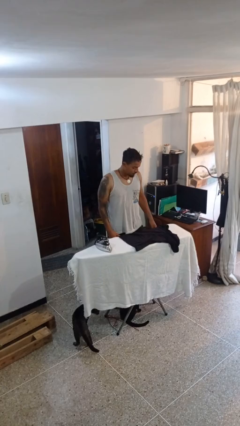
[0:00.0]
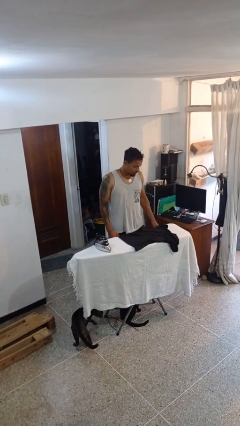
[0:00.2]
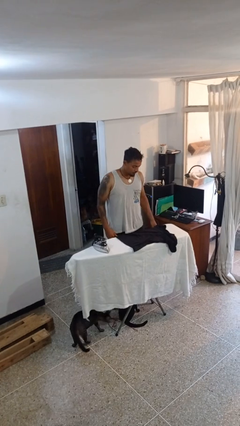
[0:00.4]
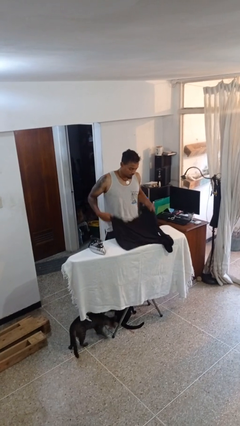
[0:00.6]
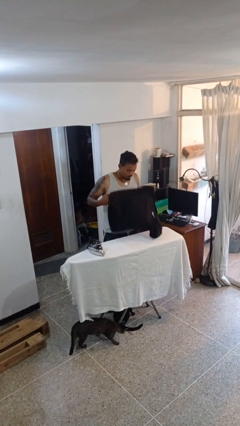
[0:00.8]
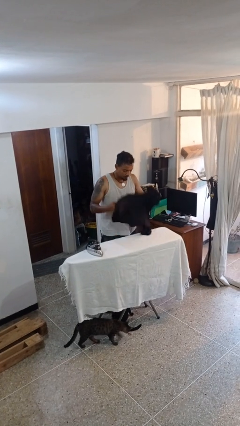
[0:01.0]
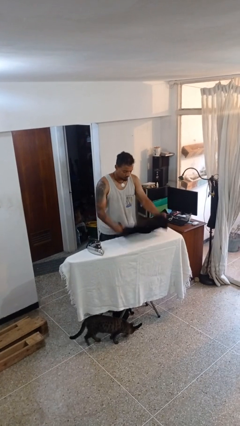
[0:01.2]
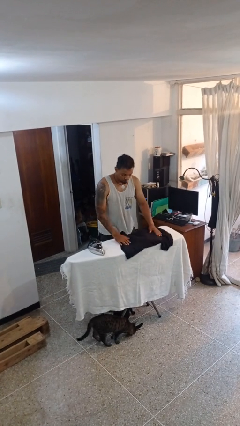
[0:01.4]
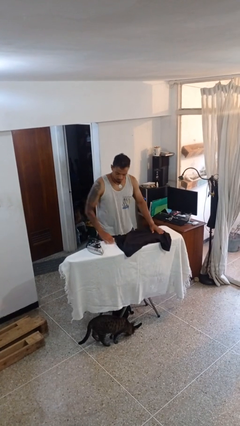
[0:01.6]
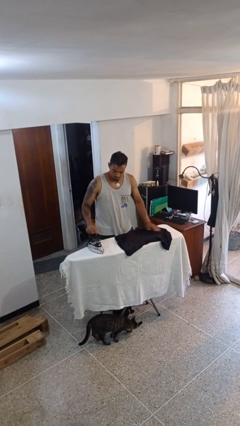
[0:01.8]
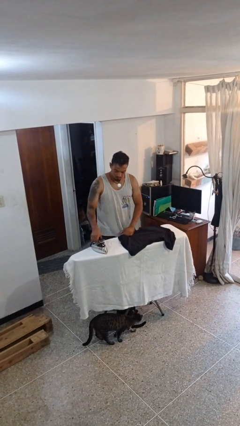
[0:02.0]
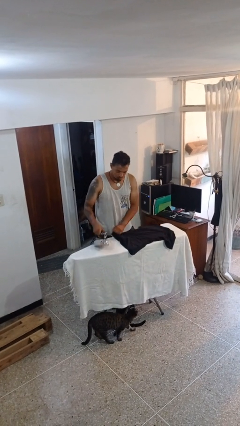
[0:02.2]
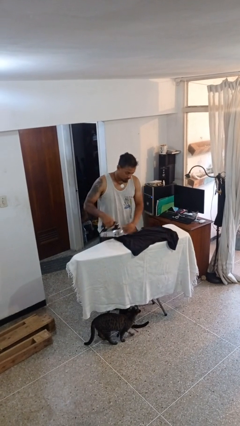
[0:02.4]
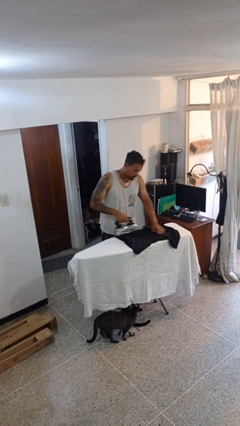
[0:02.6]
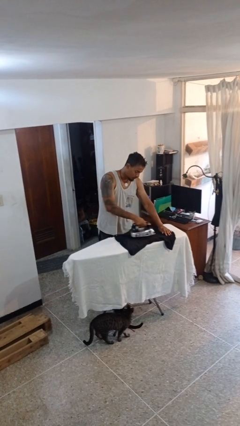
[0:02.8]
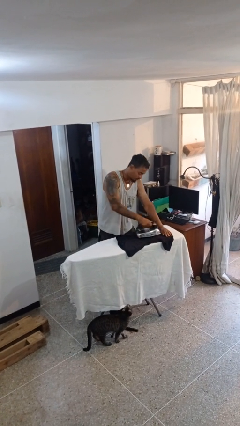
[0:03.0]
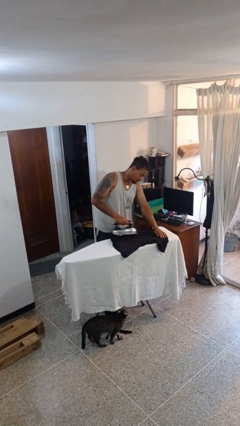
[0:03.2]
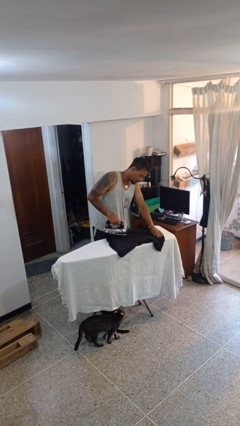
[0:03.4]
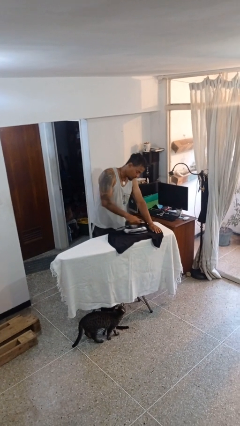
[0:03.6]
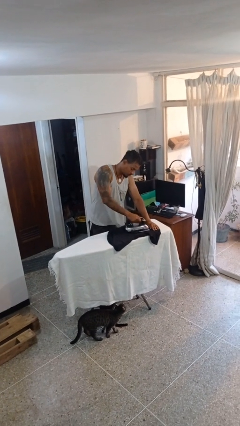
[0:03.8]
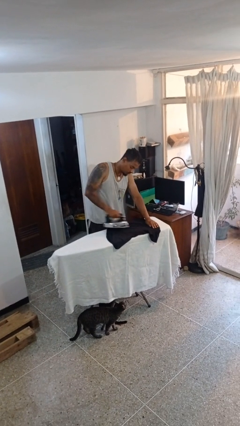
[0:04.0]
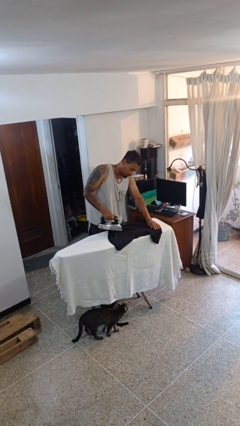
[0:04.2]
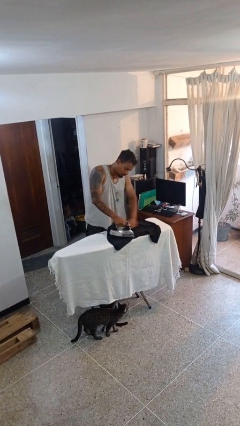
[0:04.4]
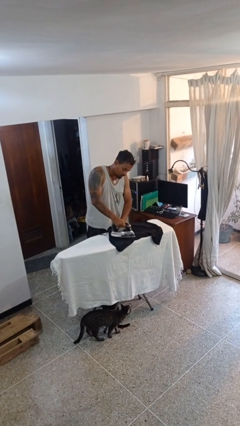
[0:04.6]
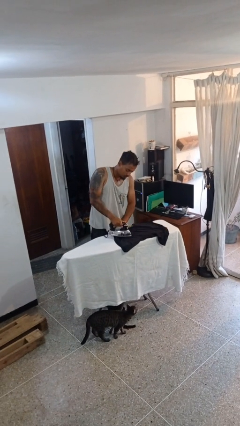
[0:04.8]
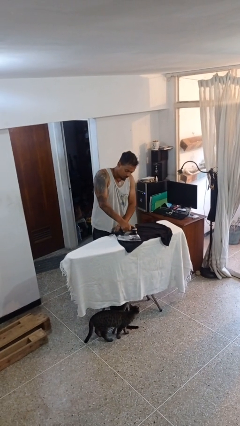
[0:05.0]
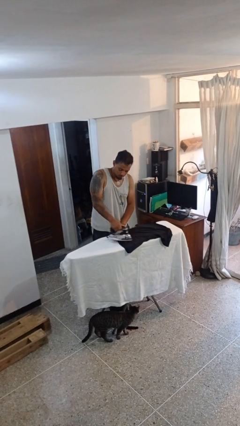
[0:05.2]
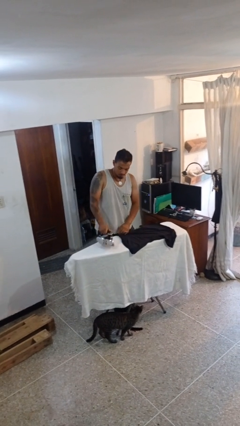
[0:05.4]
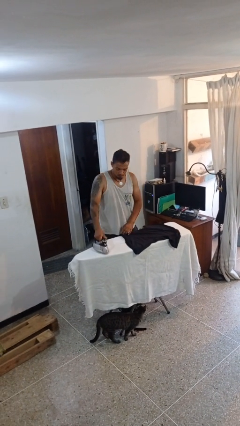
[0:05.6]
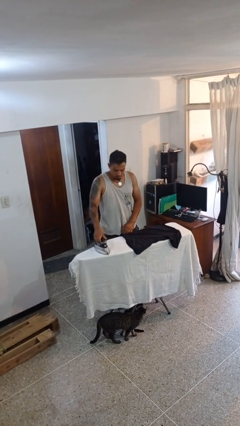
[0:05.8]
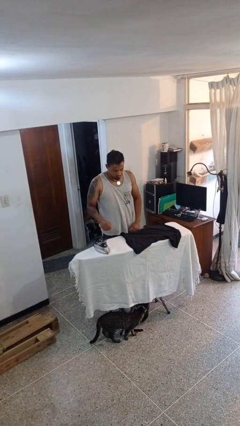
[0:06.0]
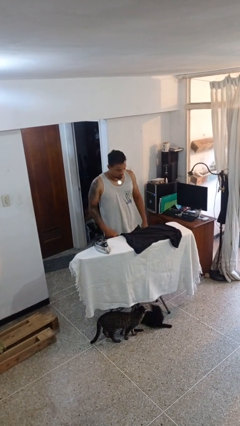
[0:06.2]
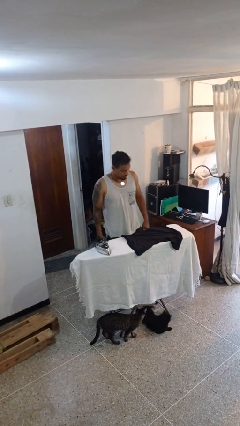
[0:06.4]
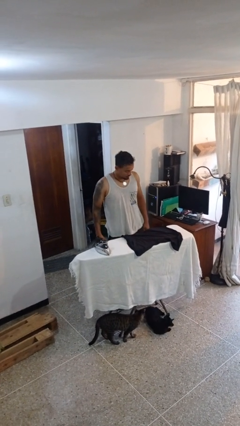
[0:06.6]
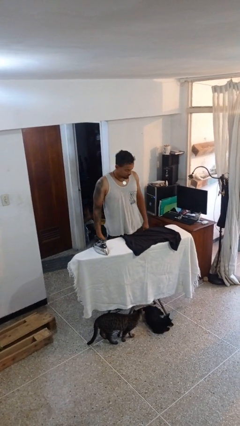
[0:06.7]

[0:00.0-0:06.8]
person irons clothes

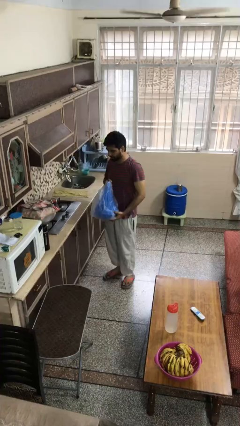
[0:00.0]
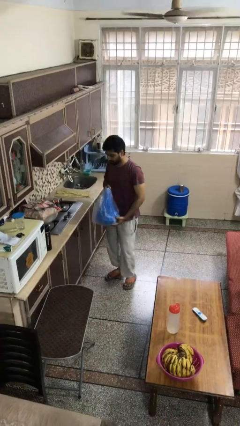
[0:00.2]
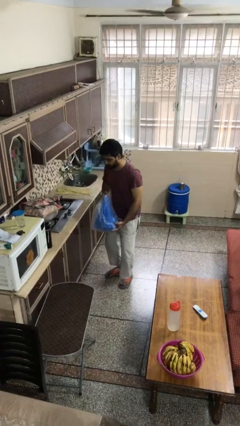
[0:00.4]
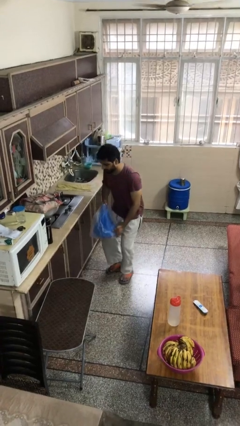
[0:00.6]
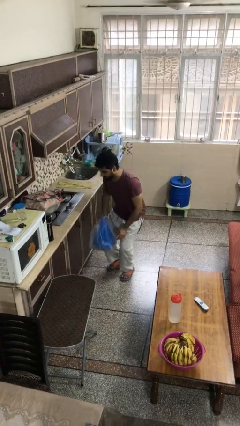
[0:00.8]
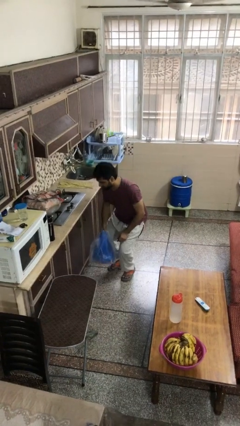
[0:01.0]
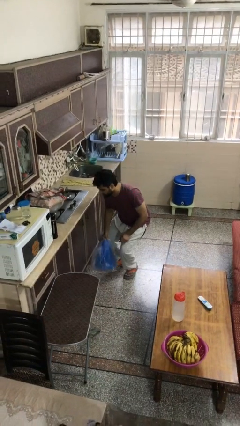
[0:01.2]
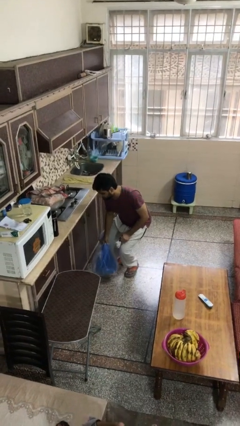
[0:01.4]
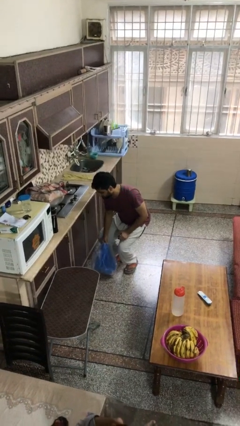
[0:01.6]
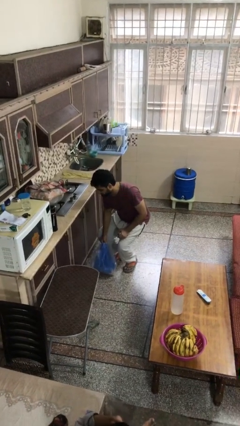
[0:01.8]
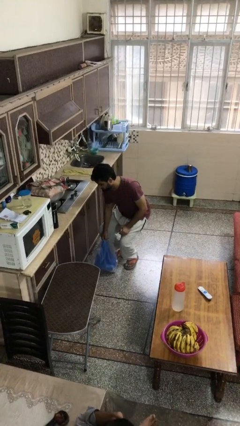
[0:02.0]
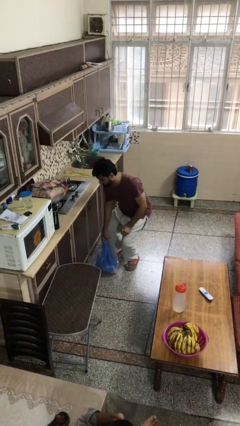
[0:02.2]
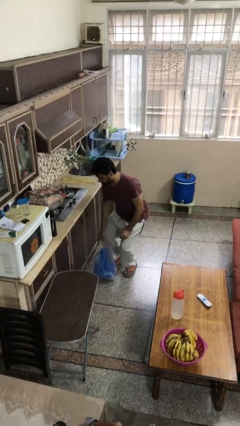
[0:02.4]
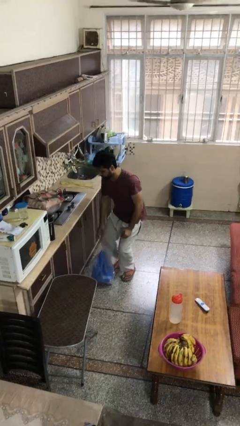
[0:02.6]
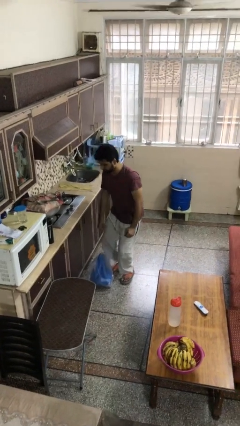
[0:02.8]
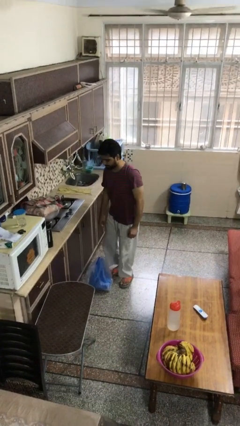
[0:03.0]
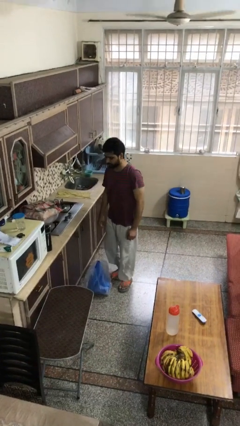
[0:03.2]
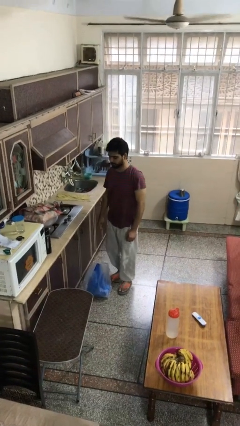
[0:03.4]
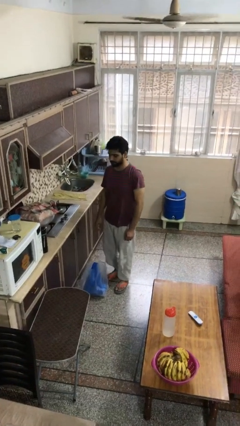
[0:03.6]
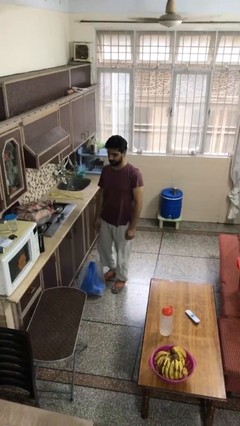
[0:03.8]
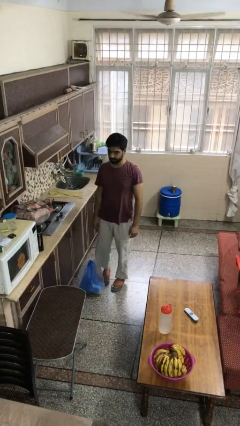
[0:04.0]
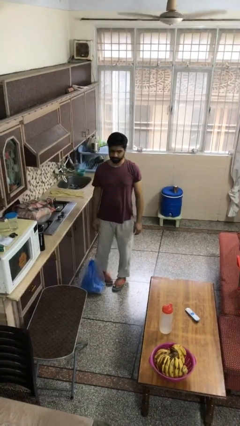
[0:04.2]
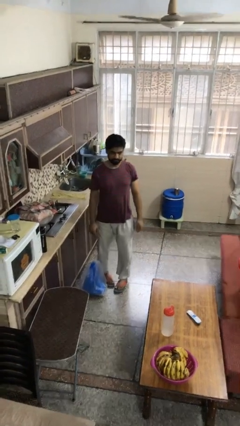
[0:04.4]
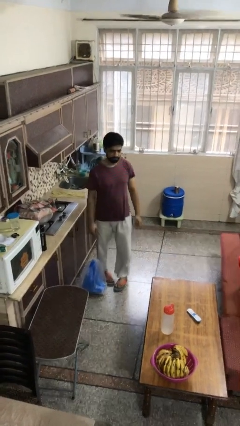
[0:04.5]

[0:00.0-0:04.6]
person puts down object on floor

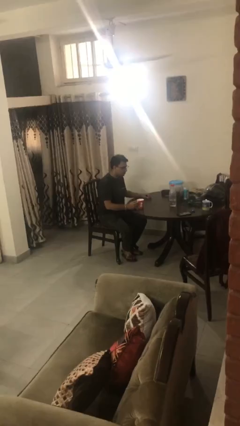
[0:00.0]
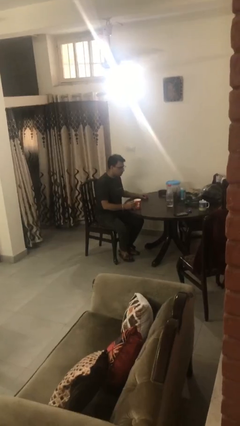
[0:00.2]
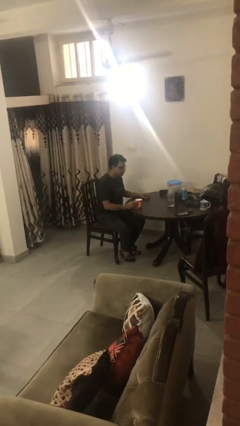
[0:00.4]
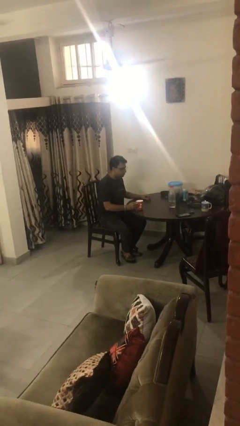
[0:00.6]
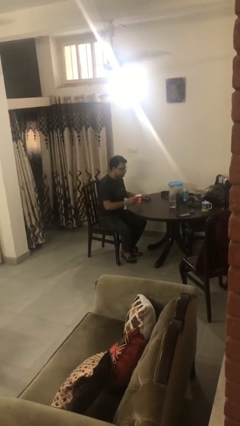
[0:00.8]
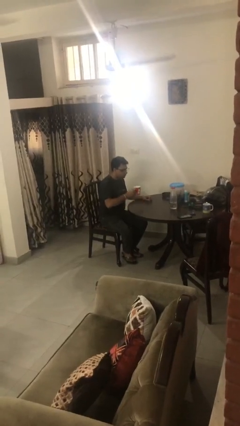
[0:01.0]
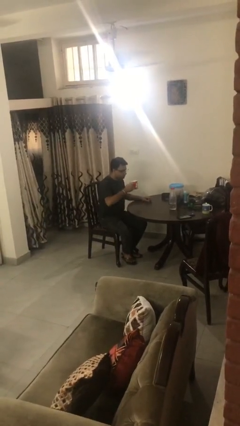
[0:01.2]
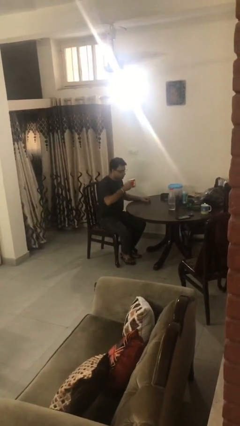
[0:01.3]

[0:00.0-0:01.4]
person picks up object from table

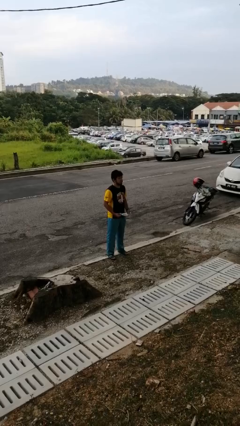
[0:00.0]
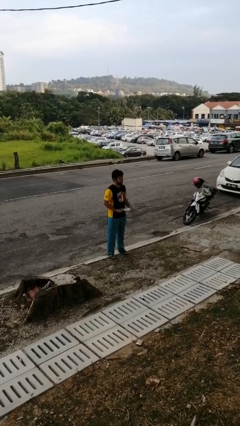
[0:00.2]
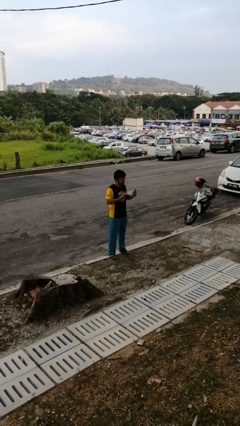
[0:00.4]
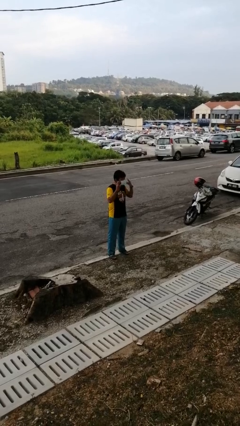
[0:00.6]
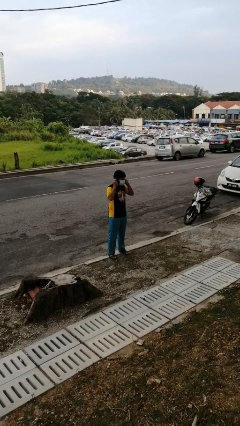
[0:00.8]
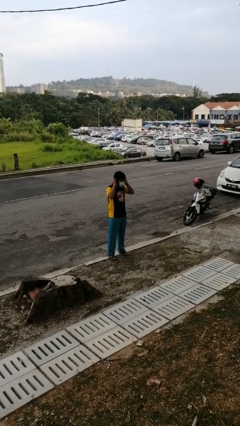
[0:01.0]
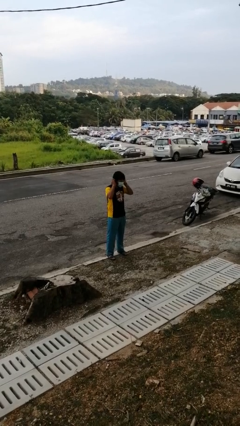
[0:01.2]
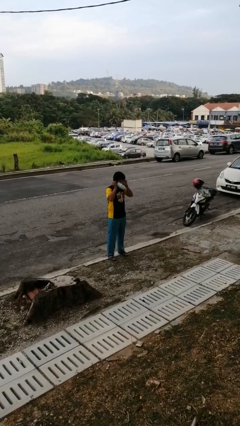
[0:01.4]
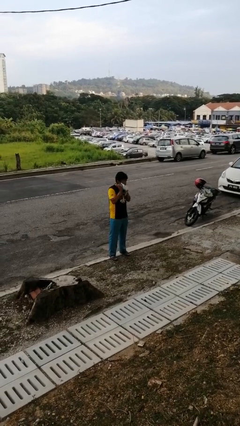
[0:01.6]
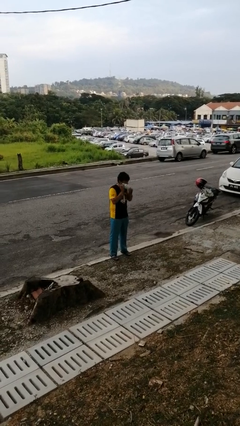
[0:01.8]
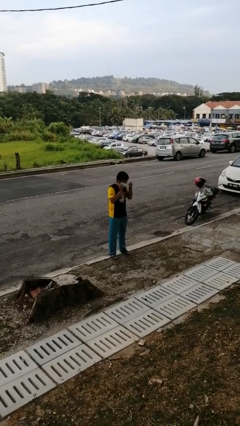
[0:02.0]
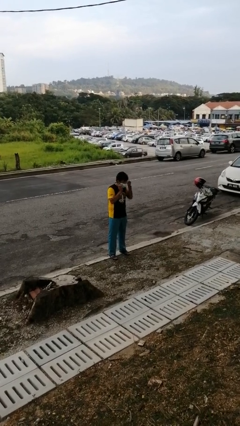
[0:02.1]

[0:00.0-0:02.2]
person puts on facemask

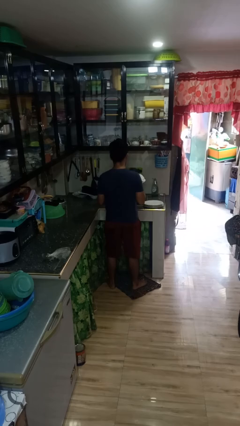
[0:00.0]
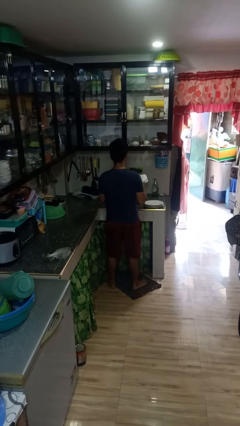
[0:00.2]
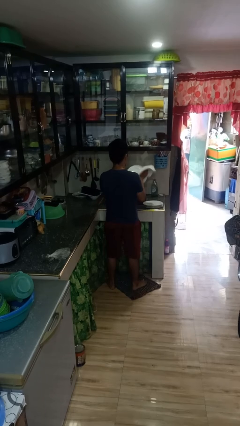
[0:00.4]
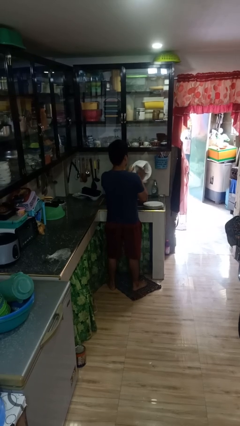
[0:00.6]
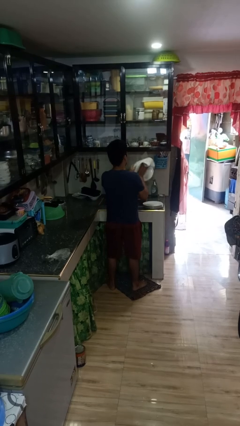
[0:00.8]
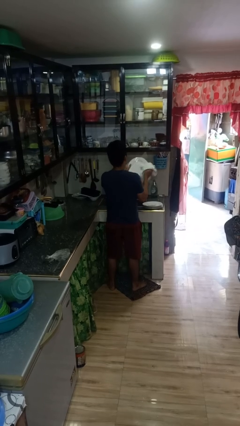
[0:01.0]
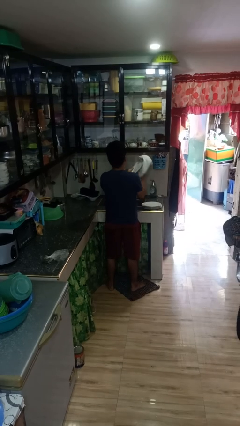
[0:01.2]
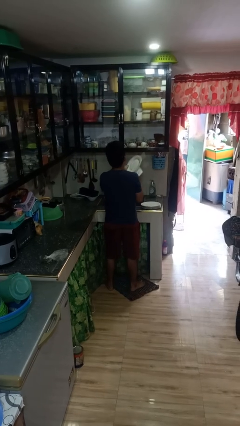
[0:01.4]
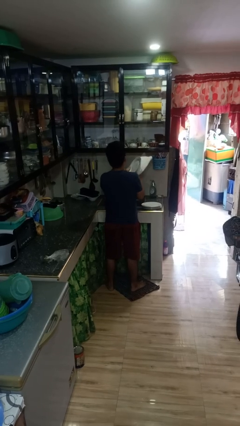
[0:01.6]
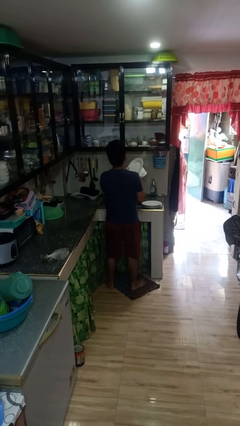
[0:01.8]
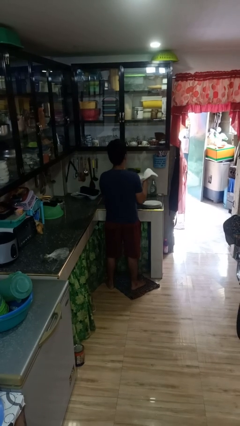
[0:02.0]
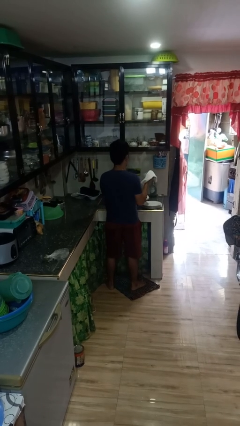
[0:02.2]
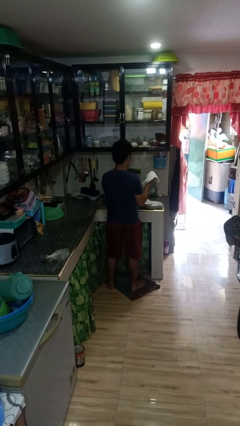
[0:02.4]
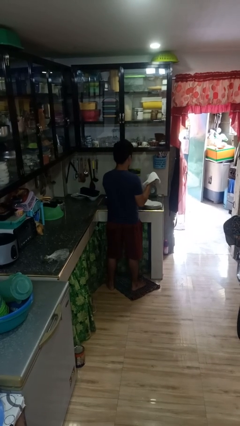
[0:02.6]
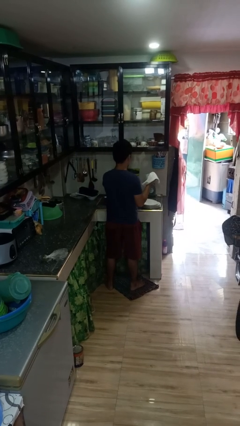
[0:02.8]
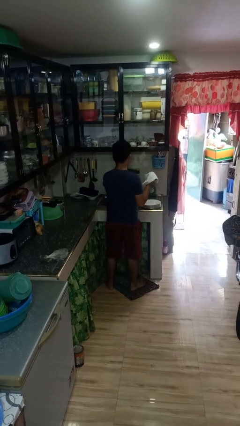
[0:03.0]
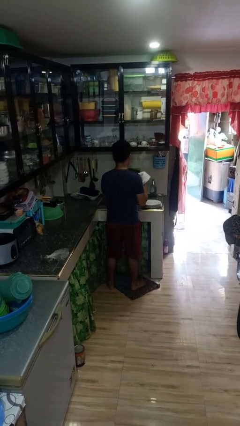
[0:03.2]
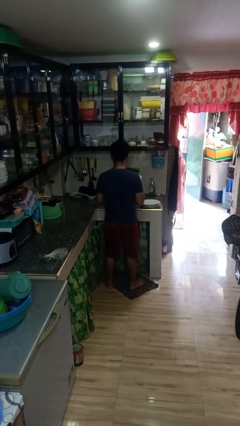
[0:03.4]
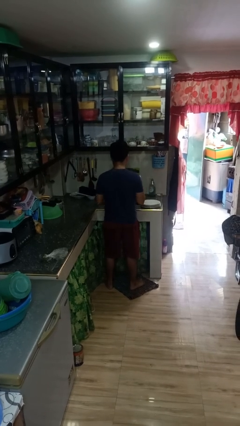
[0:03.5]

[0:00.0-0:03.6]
person dries dish
